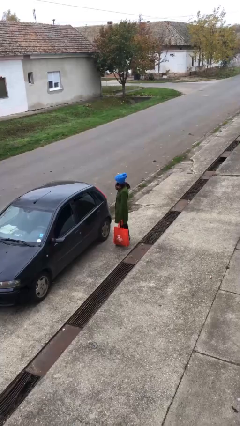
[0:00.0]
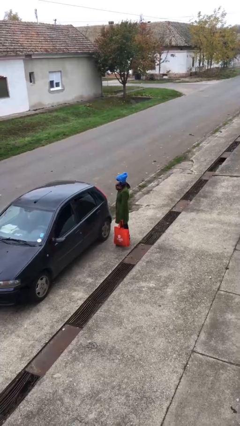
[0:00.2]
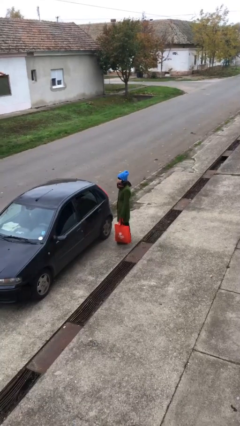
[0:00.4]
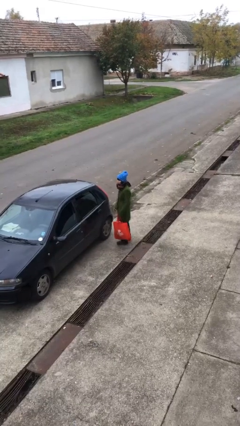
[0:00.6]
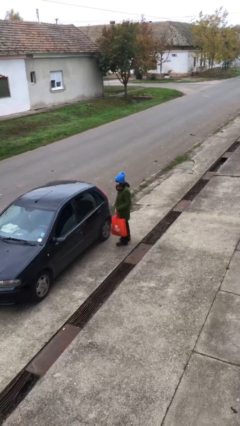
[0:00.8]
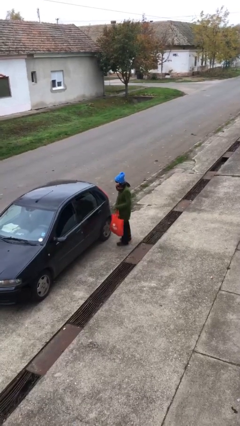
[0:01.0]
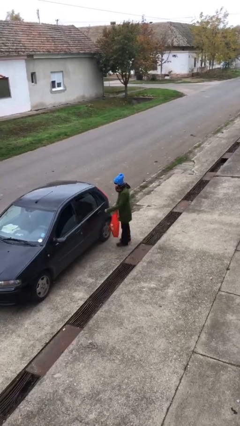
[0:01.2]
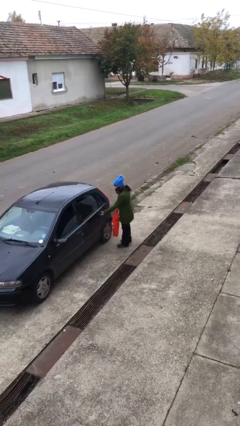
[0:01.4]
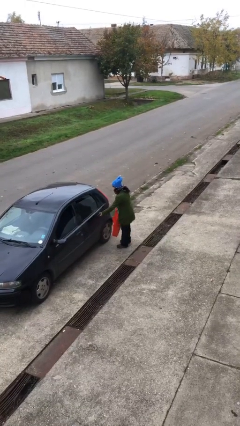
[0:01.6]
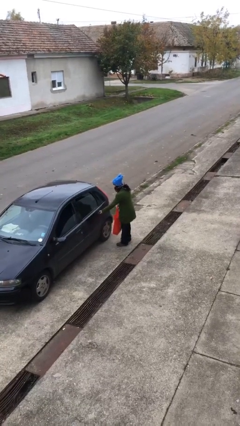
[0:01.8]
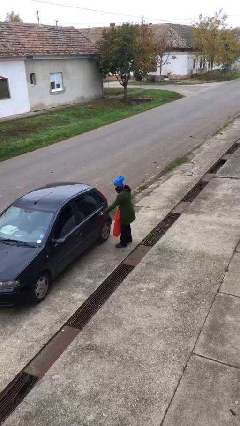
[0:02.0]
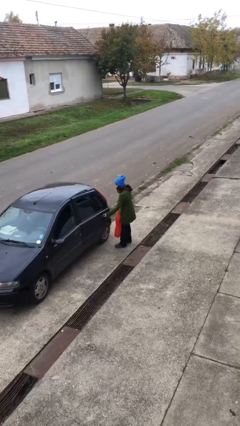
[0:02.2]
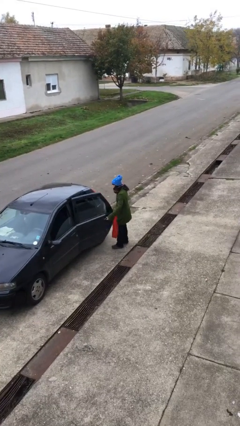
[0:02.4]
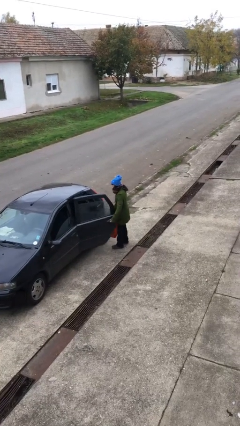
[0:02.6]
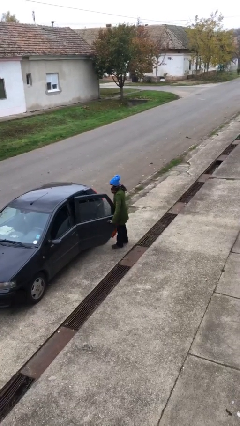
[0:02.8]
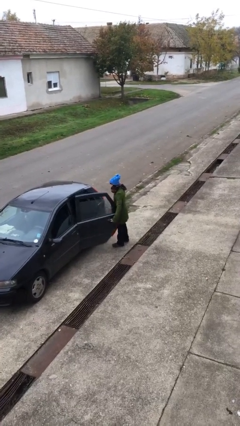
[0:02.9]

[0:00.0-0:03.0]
person opens car door

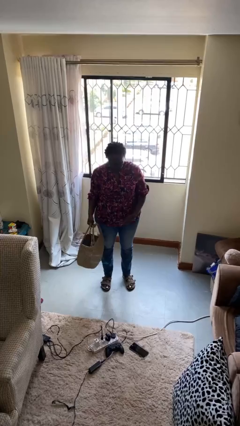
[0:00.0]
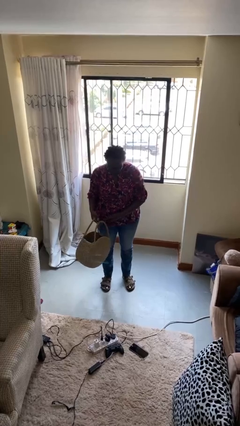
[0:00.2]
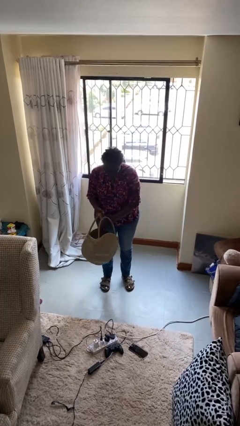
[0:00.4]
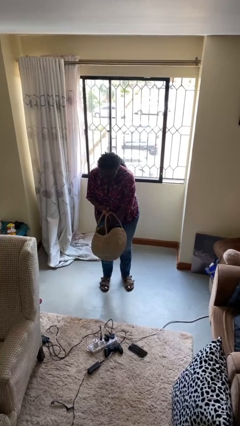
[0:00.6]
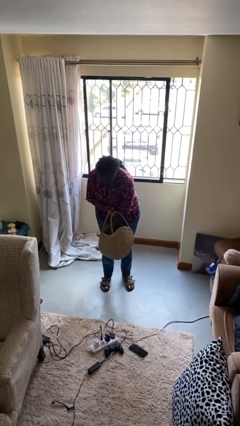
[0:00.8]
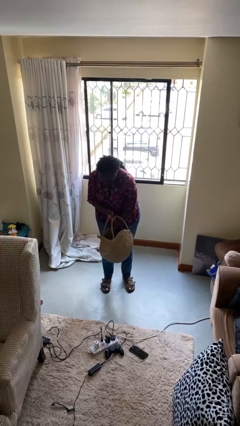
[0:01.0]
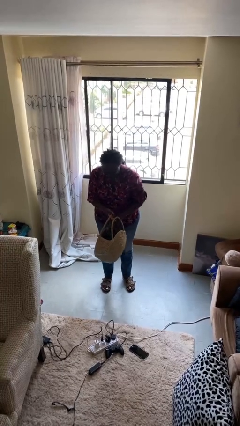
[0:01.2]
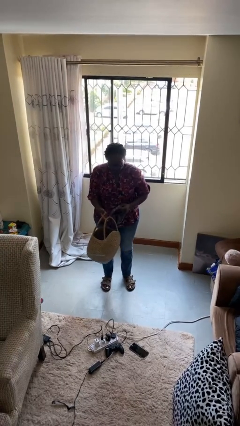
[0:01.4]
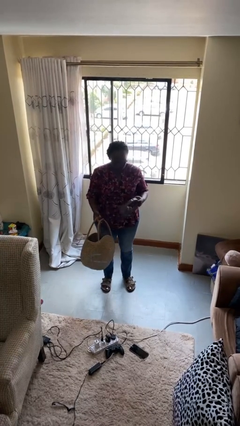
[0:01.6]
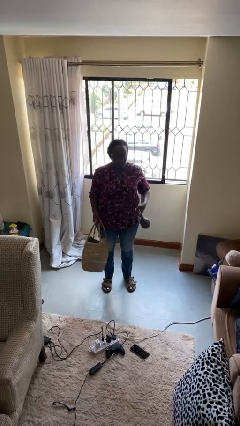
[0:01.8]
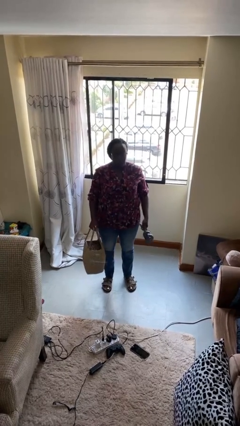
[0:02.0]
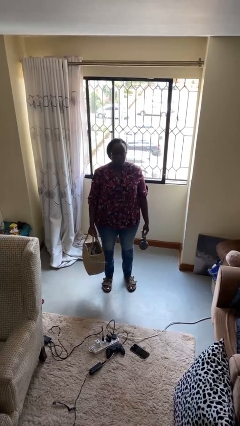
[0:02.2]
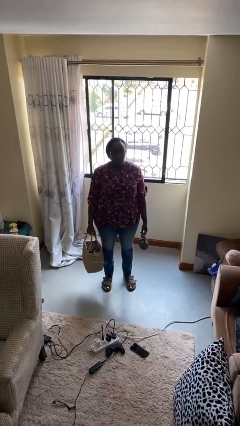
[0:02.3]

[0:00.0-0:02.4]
person takes object from basket

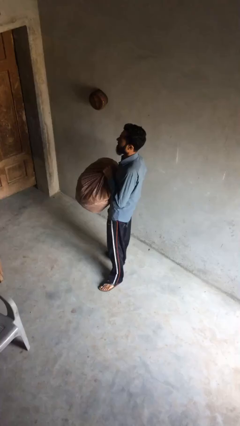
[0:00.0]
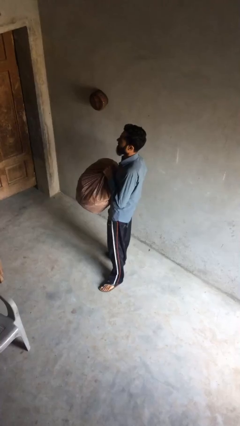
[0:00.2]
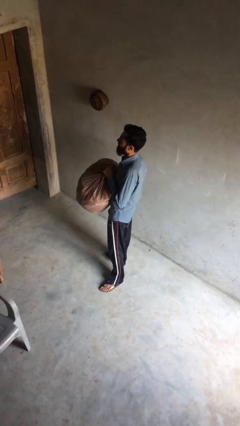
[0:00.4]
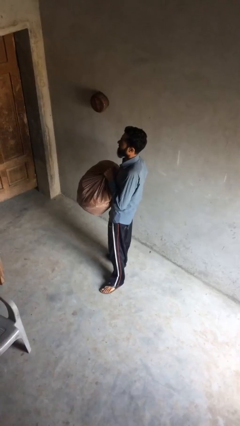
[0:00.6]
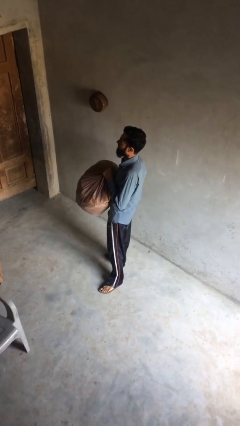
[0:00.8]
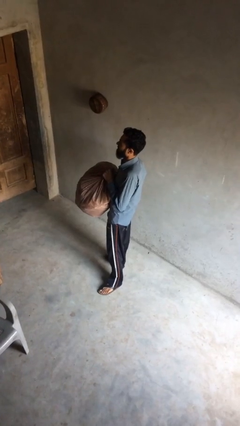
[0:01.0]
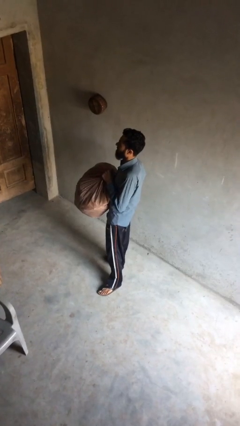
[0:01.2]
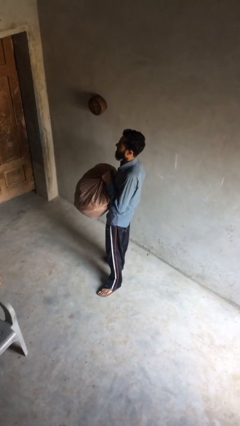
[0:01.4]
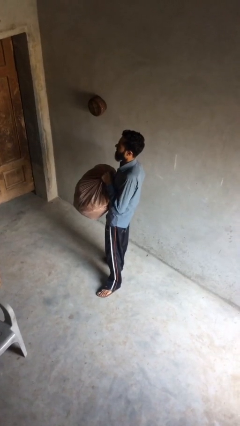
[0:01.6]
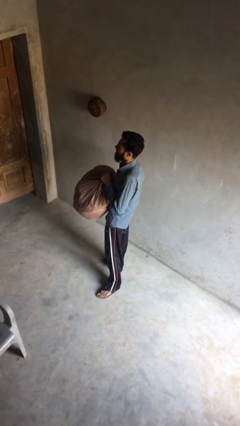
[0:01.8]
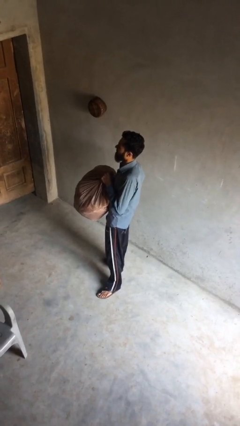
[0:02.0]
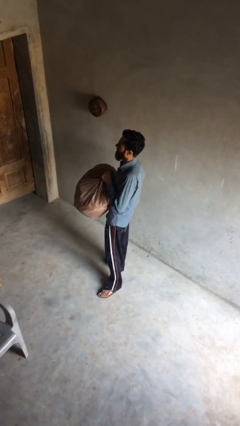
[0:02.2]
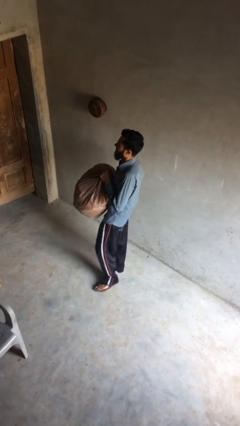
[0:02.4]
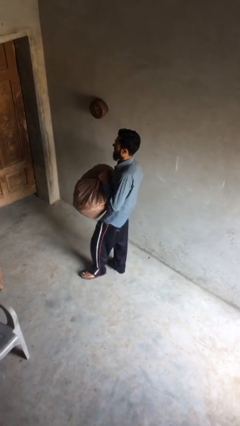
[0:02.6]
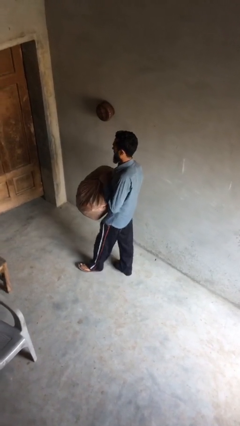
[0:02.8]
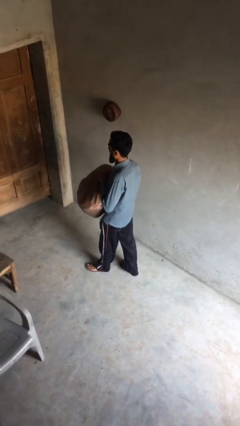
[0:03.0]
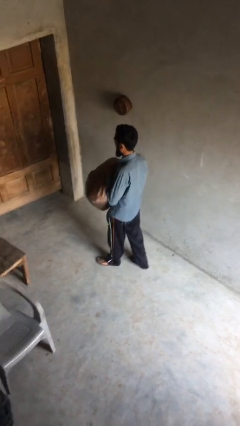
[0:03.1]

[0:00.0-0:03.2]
person carries heavy object

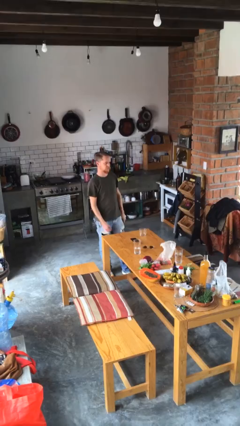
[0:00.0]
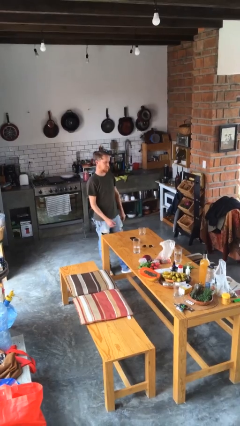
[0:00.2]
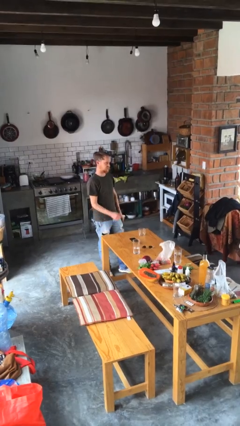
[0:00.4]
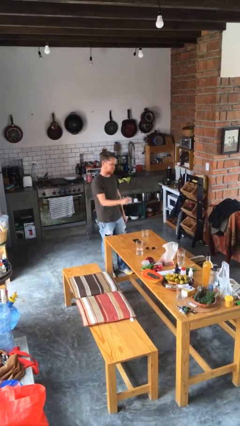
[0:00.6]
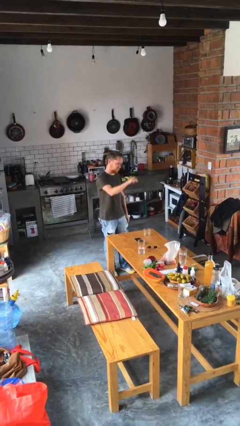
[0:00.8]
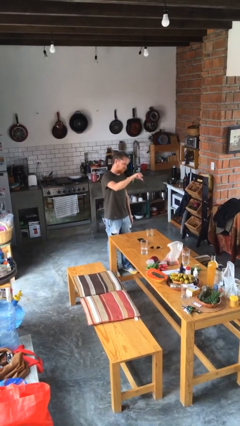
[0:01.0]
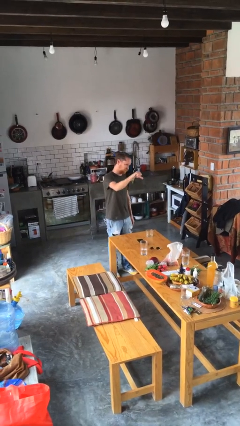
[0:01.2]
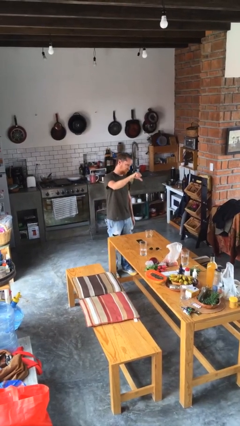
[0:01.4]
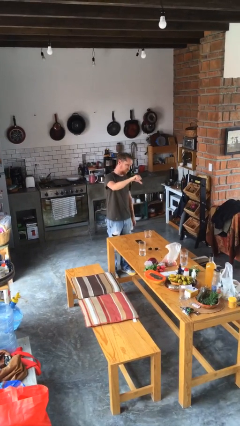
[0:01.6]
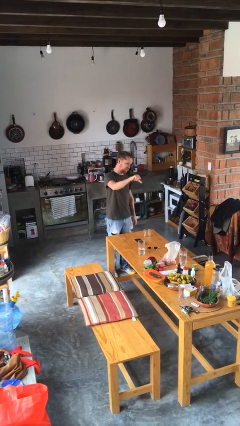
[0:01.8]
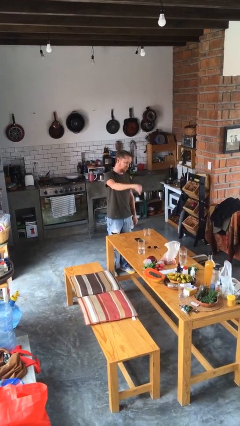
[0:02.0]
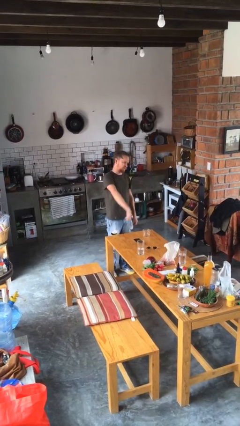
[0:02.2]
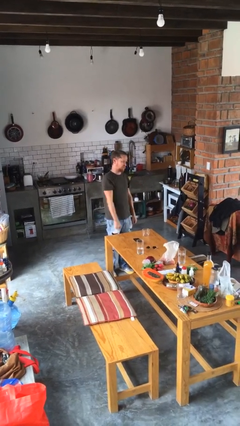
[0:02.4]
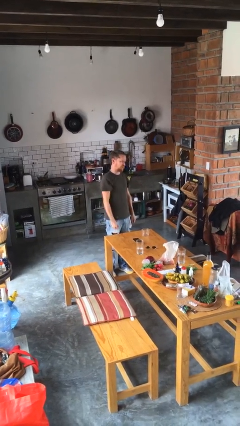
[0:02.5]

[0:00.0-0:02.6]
person gestures thumbs down

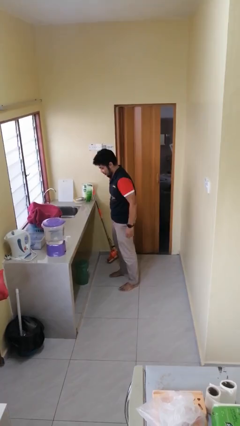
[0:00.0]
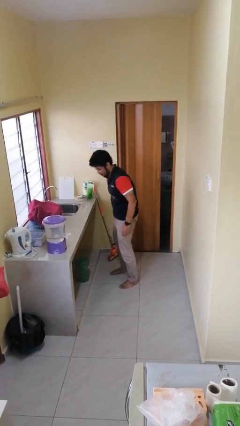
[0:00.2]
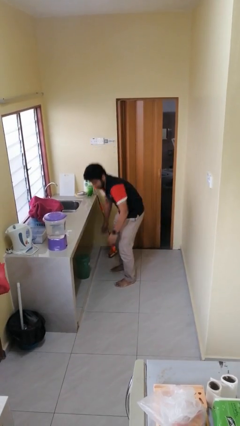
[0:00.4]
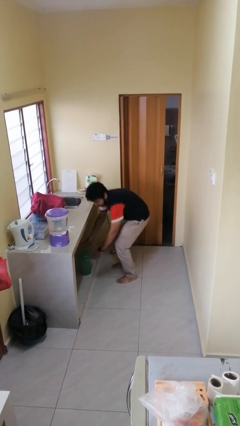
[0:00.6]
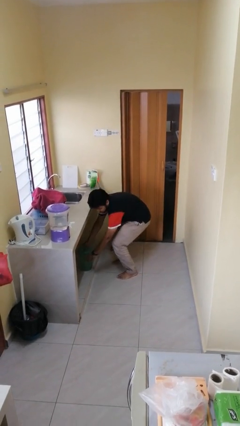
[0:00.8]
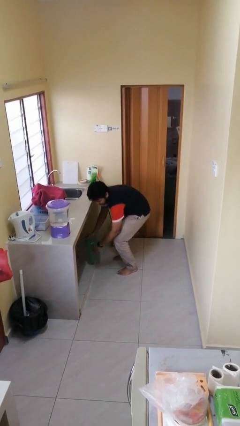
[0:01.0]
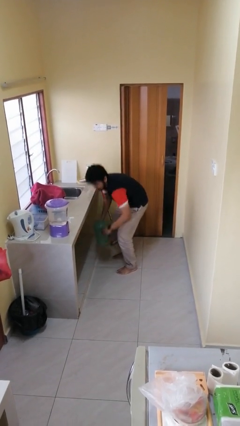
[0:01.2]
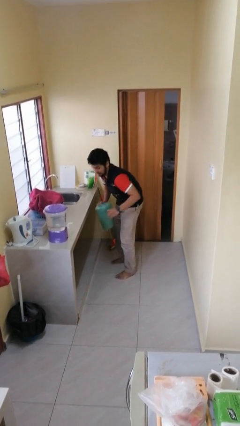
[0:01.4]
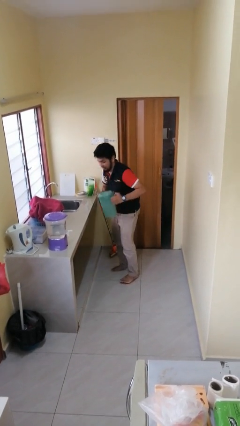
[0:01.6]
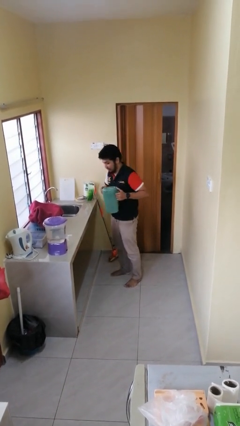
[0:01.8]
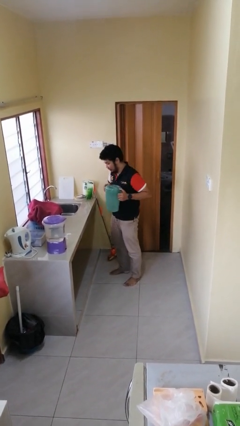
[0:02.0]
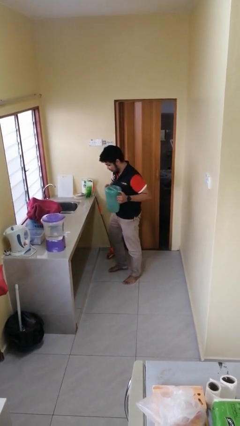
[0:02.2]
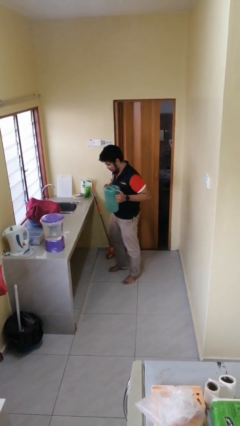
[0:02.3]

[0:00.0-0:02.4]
person picks up object from cabinet

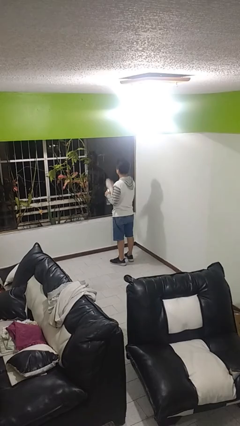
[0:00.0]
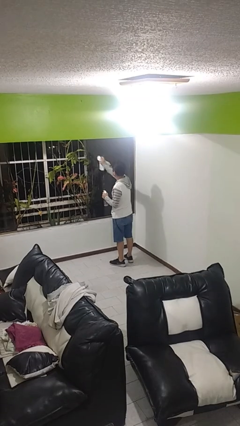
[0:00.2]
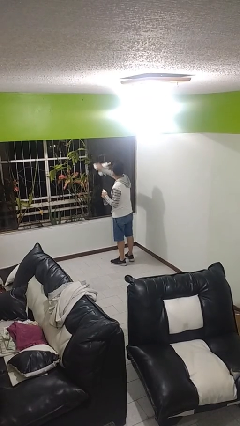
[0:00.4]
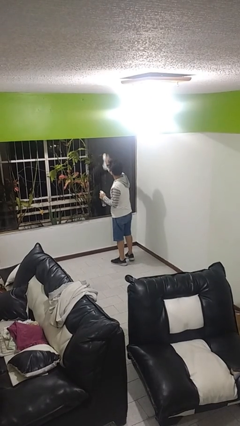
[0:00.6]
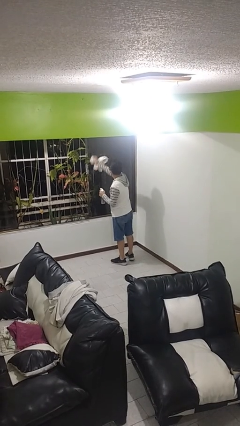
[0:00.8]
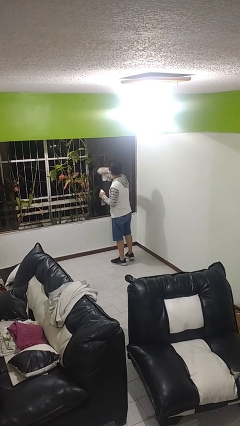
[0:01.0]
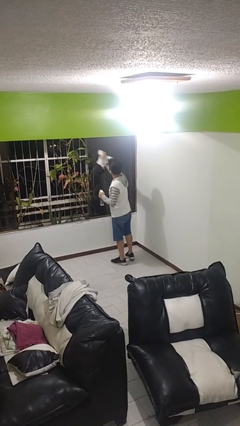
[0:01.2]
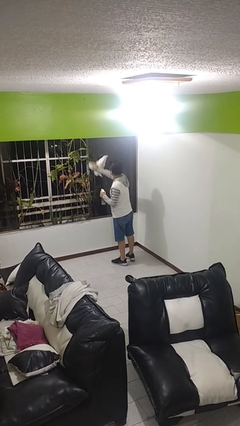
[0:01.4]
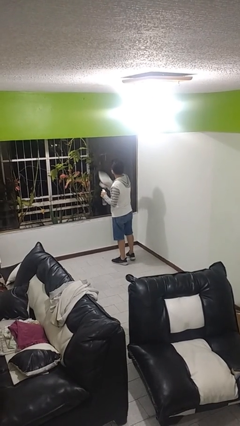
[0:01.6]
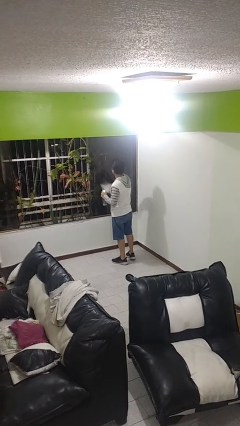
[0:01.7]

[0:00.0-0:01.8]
person washes window

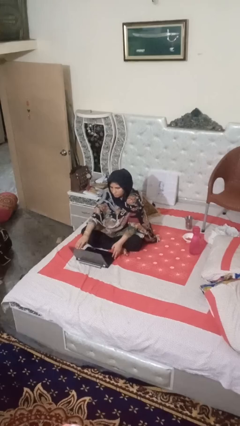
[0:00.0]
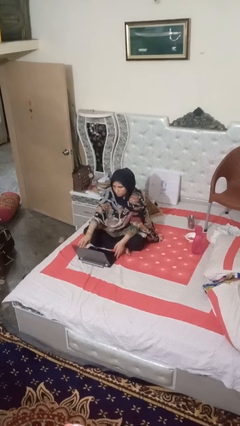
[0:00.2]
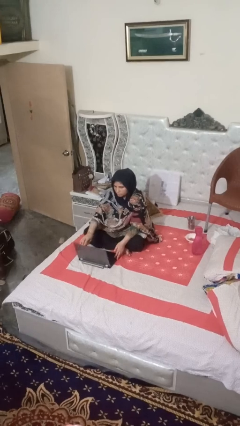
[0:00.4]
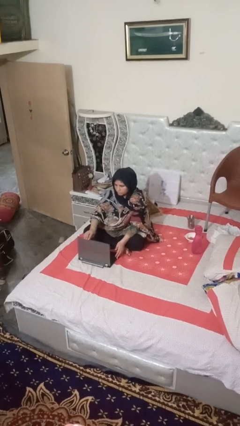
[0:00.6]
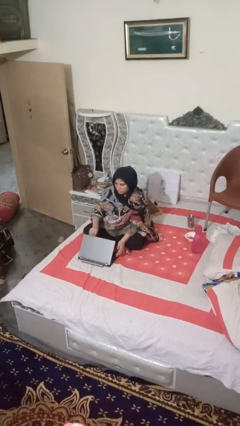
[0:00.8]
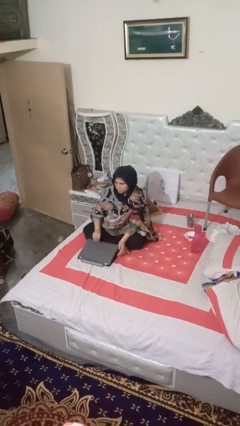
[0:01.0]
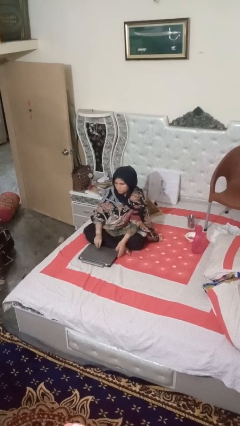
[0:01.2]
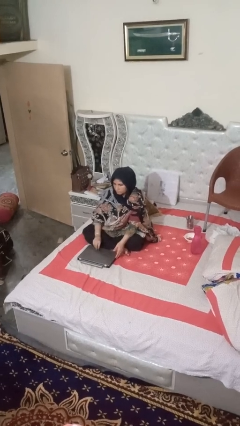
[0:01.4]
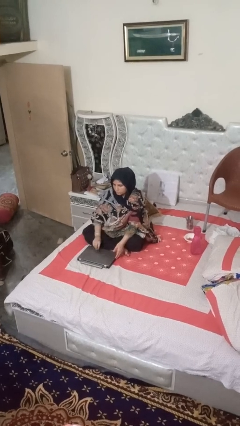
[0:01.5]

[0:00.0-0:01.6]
person closes laptop
